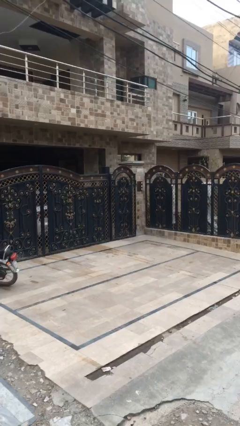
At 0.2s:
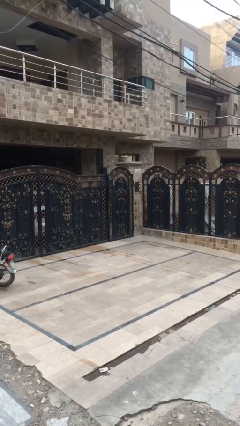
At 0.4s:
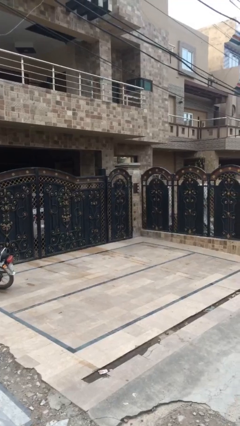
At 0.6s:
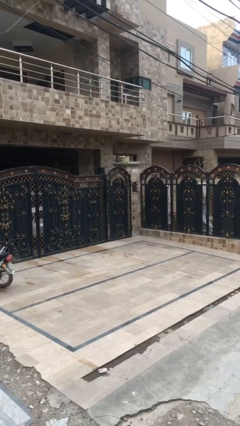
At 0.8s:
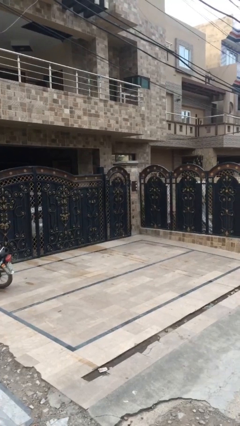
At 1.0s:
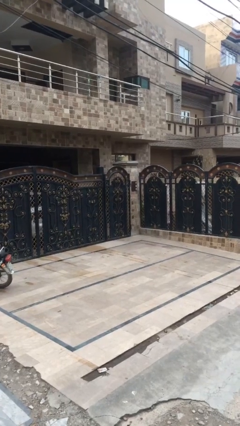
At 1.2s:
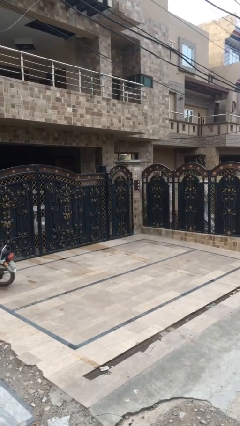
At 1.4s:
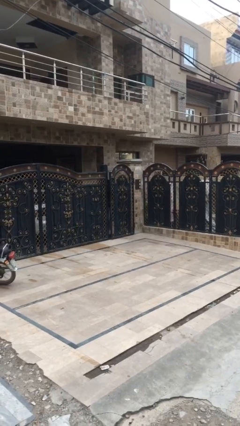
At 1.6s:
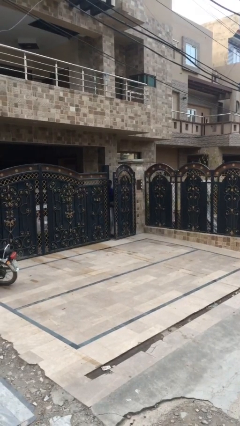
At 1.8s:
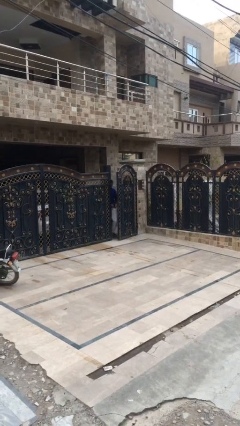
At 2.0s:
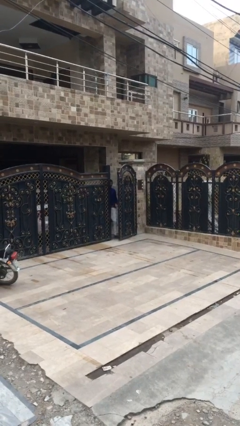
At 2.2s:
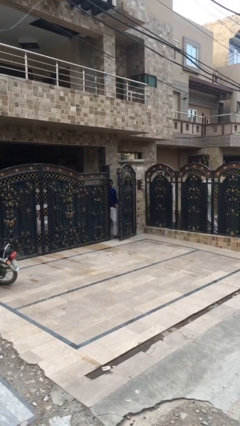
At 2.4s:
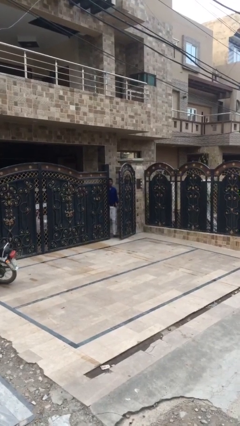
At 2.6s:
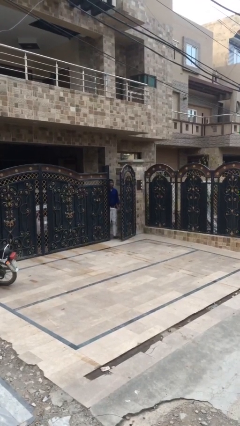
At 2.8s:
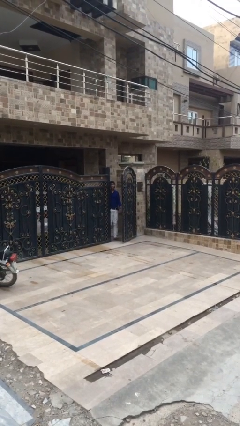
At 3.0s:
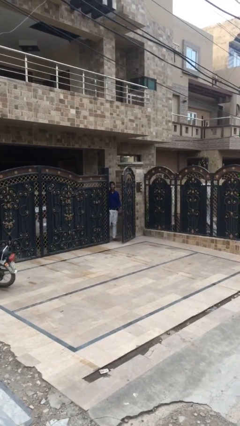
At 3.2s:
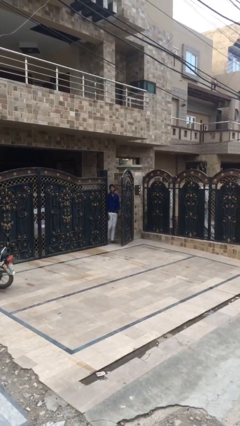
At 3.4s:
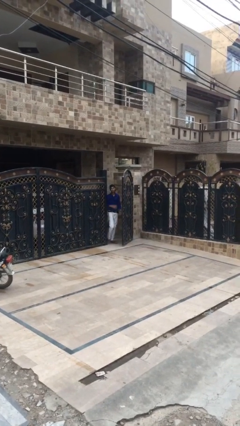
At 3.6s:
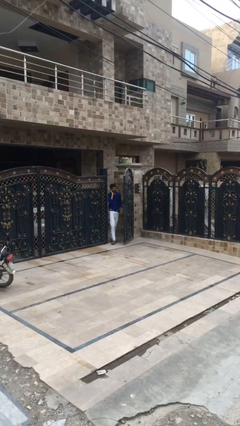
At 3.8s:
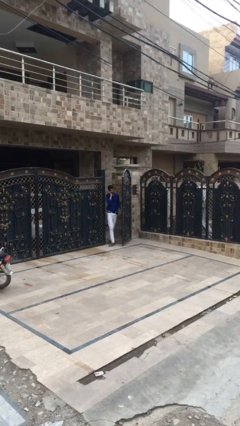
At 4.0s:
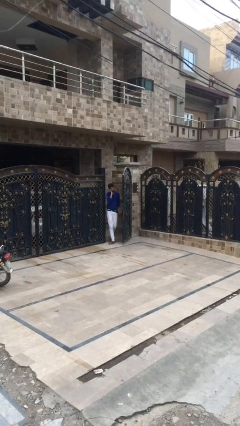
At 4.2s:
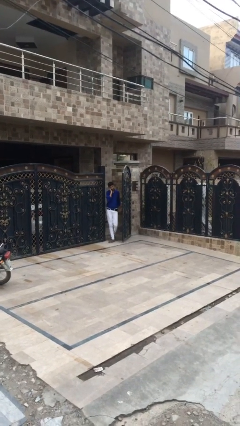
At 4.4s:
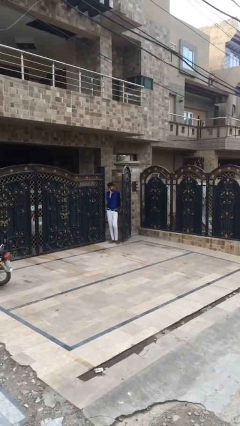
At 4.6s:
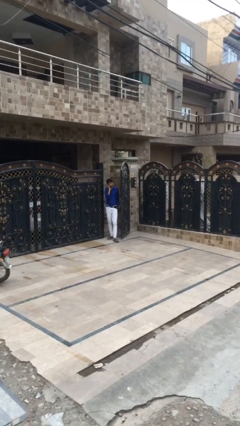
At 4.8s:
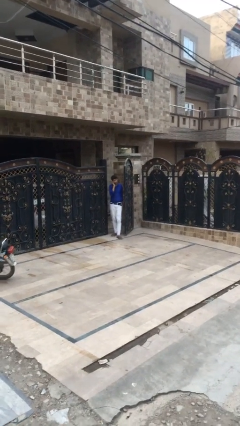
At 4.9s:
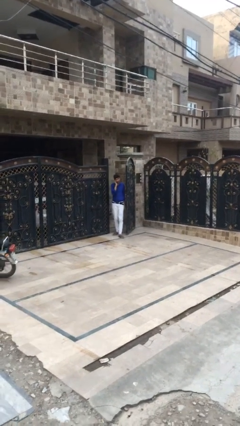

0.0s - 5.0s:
person opens facility door

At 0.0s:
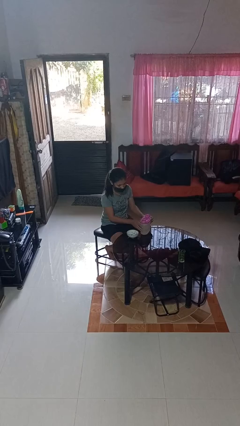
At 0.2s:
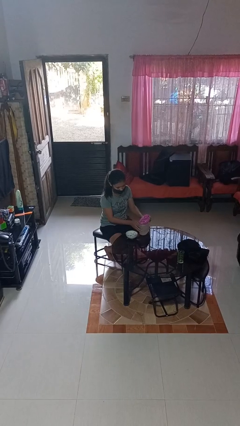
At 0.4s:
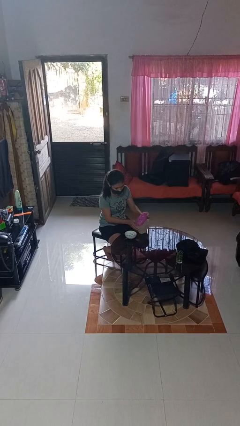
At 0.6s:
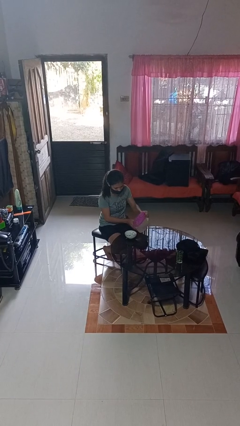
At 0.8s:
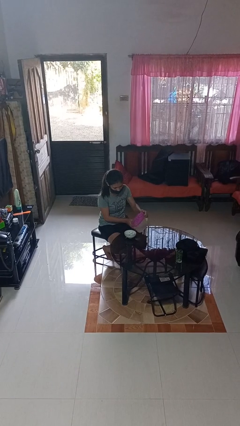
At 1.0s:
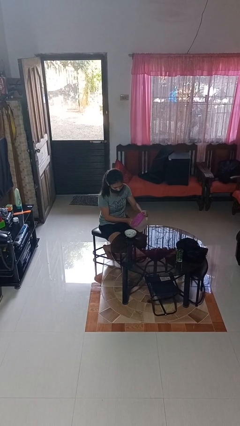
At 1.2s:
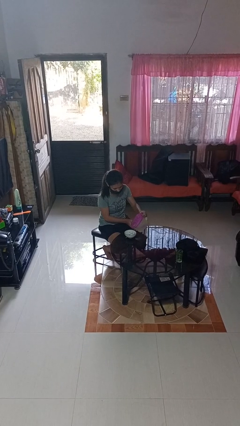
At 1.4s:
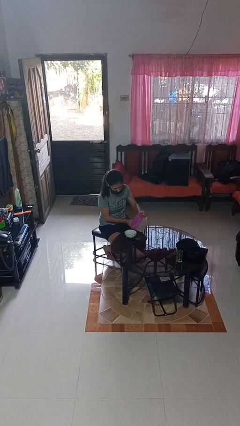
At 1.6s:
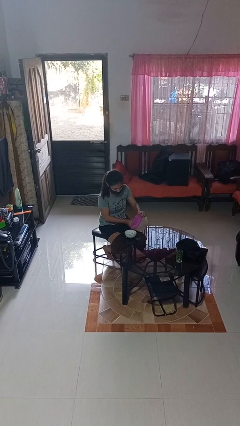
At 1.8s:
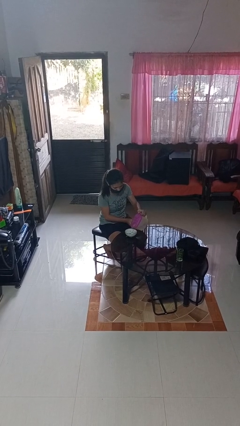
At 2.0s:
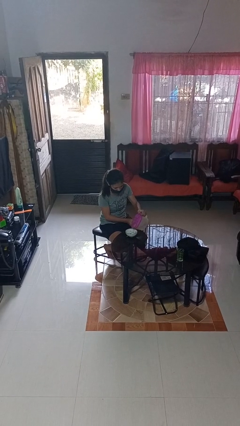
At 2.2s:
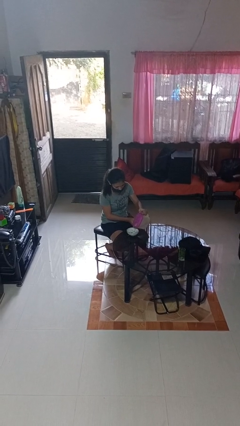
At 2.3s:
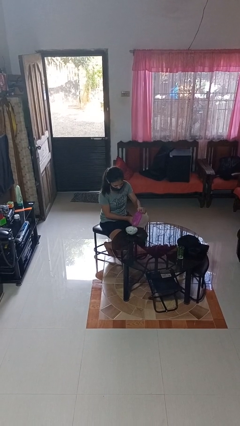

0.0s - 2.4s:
person pours into bowl

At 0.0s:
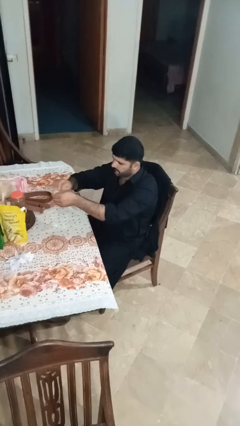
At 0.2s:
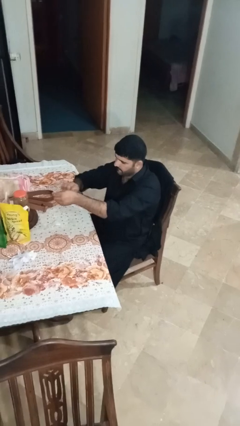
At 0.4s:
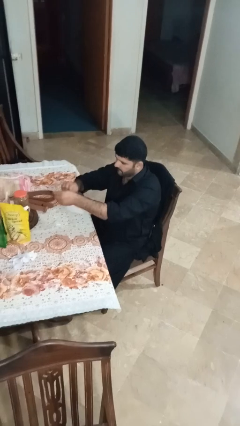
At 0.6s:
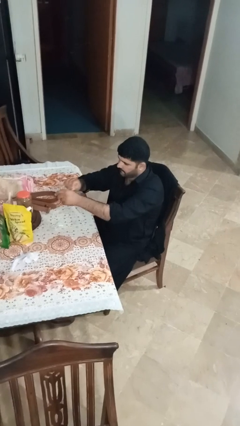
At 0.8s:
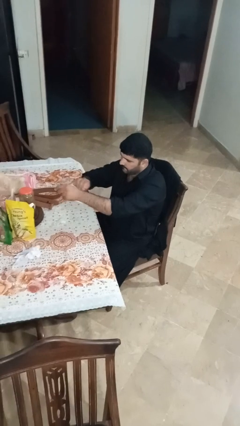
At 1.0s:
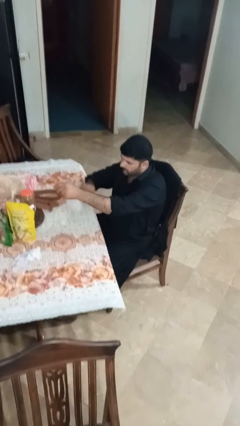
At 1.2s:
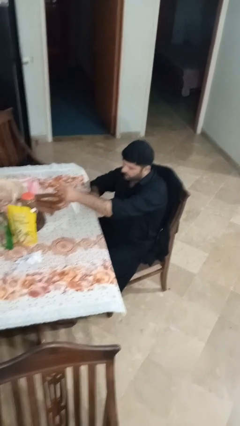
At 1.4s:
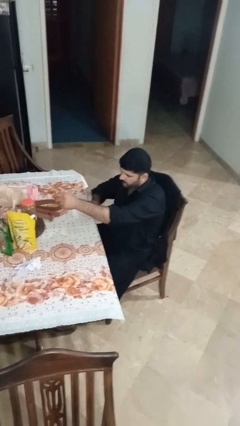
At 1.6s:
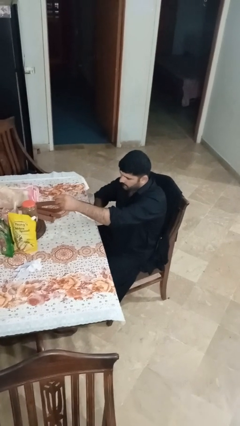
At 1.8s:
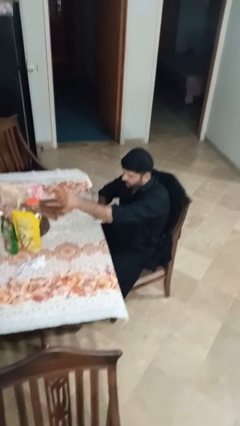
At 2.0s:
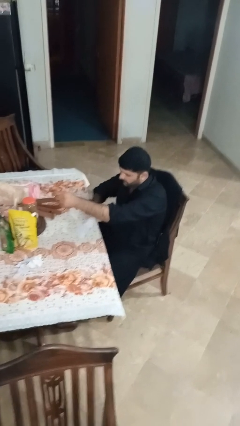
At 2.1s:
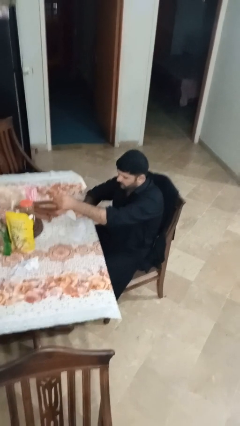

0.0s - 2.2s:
person tears paper

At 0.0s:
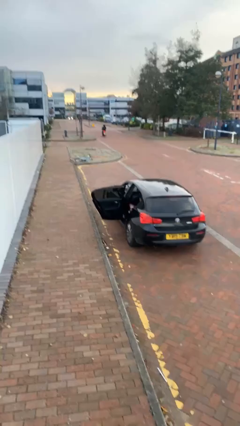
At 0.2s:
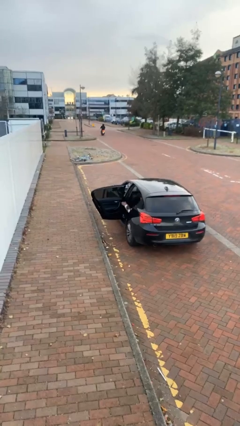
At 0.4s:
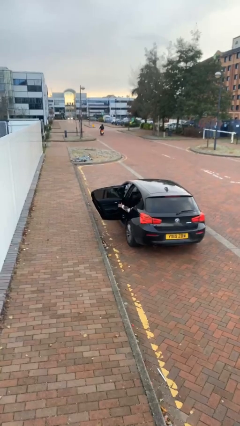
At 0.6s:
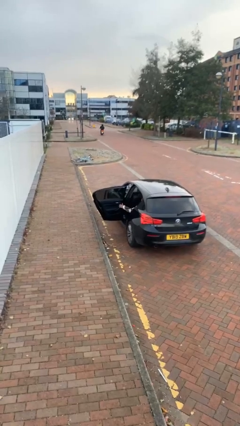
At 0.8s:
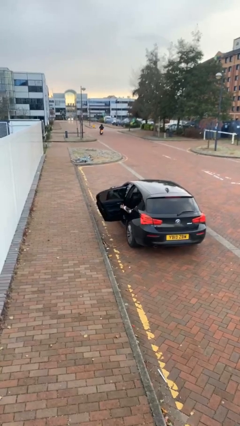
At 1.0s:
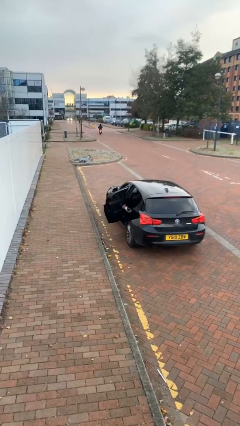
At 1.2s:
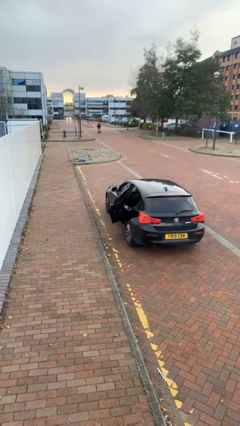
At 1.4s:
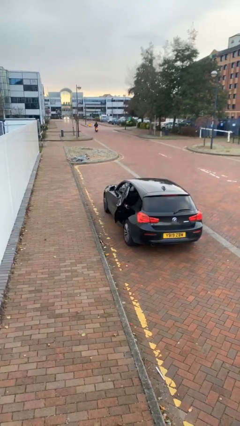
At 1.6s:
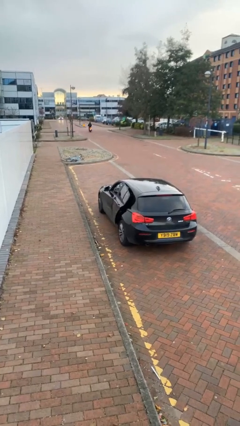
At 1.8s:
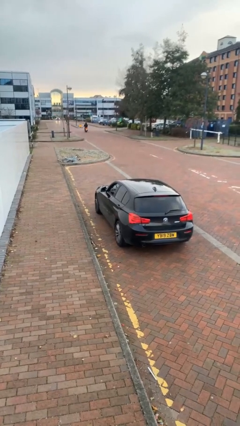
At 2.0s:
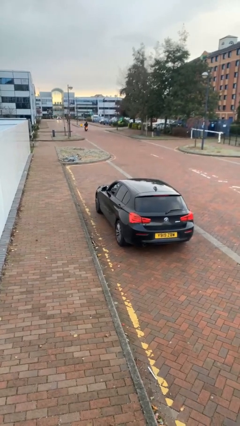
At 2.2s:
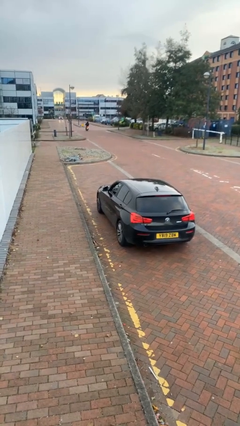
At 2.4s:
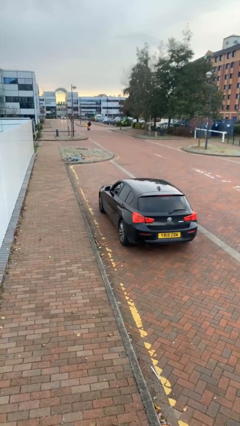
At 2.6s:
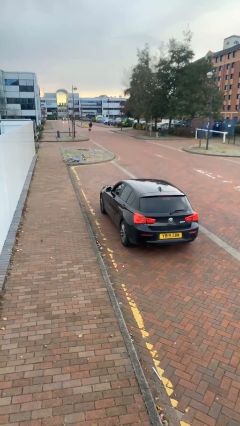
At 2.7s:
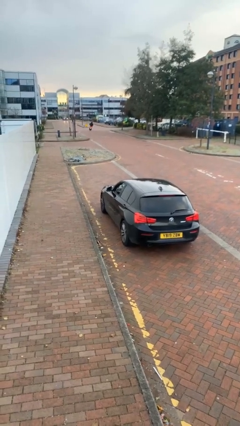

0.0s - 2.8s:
person closes car door

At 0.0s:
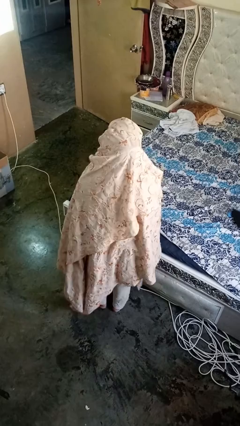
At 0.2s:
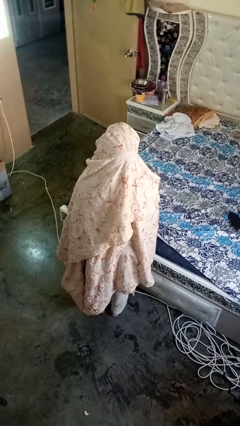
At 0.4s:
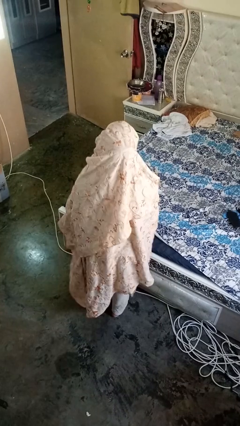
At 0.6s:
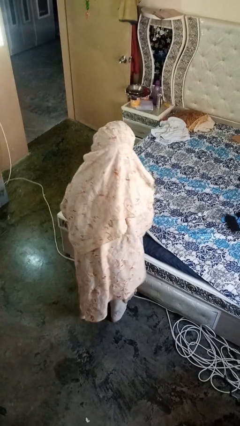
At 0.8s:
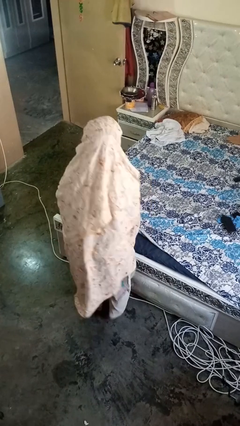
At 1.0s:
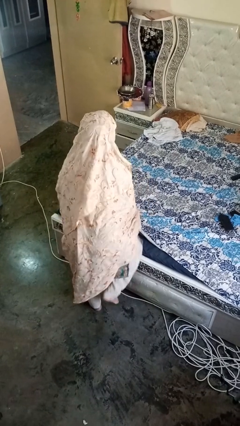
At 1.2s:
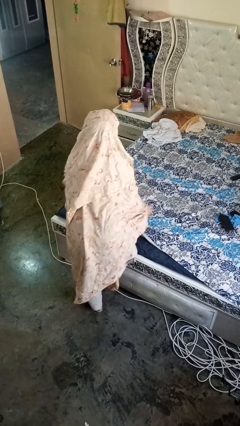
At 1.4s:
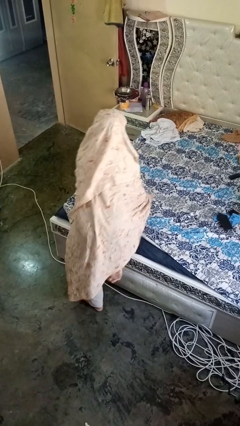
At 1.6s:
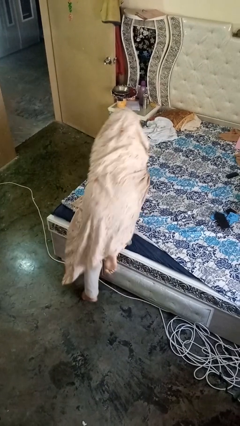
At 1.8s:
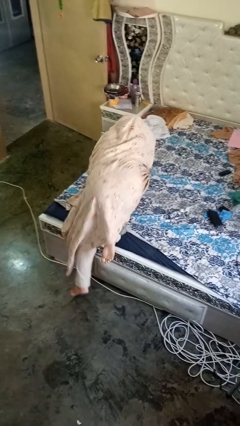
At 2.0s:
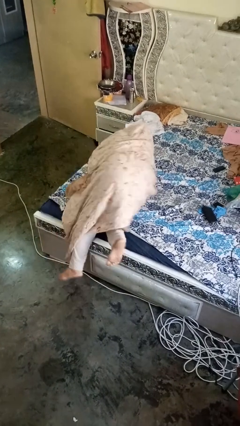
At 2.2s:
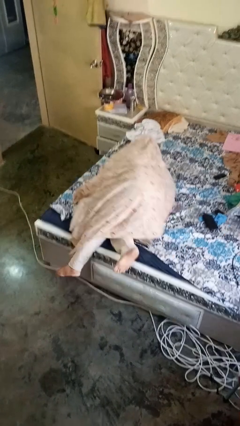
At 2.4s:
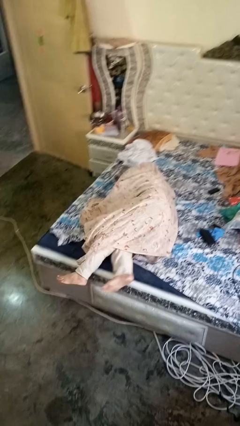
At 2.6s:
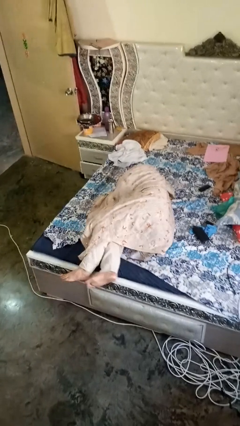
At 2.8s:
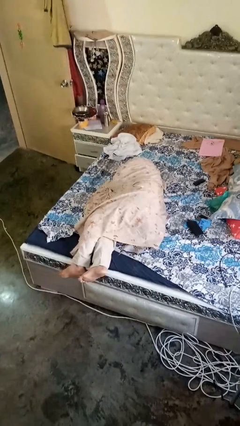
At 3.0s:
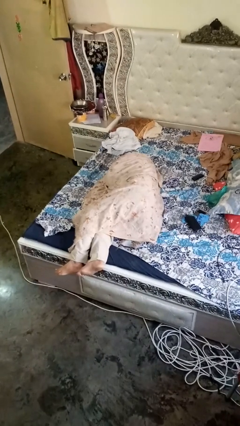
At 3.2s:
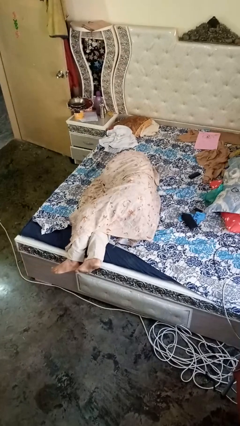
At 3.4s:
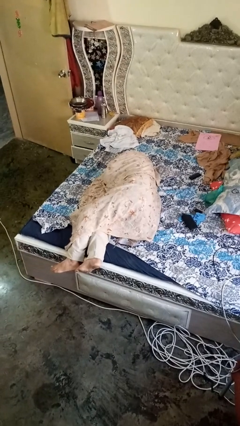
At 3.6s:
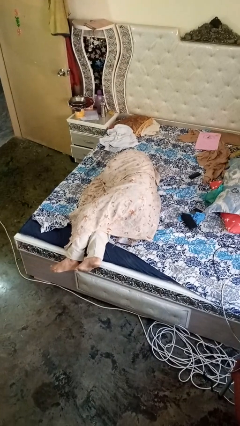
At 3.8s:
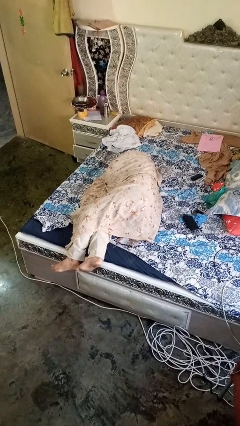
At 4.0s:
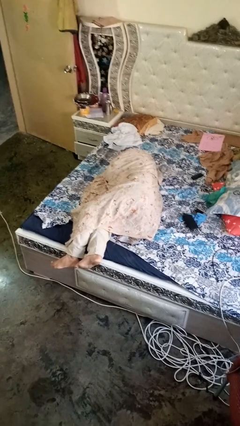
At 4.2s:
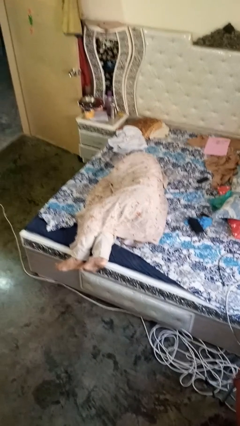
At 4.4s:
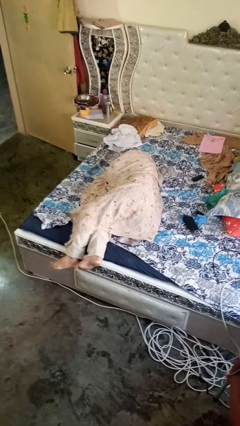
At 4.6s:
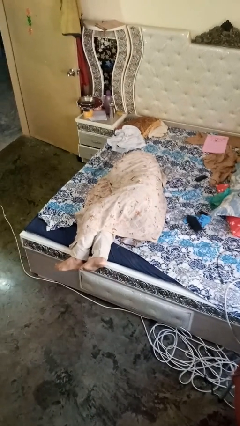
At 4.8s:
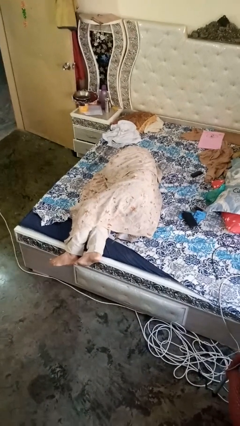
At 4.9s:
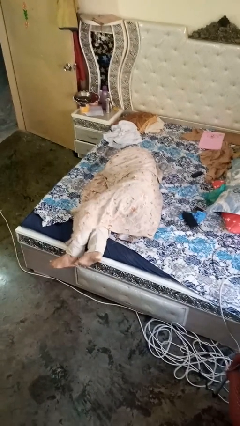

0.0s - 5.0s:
person lies down on bed
